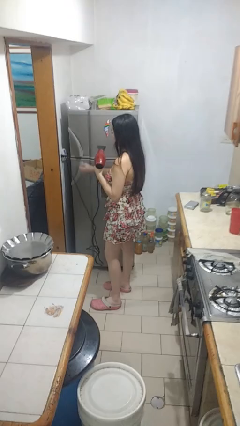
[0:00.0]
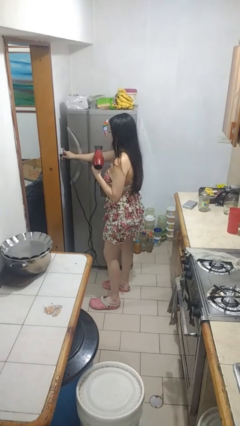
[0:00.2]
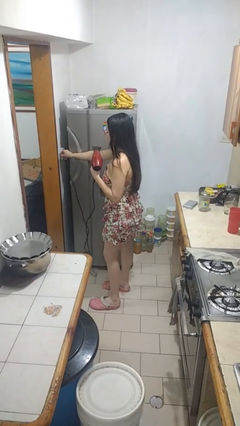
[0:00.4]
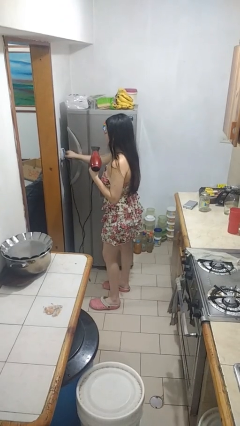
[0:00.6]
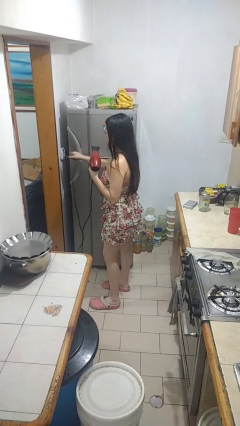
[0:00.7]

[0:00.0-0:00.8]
person unplugs from electrical socket

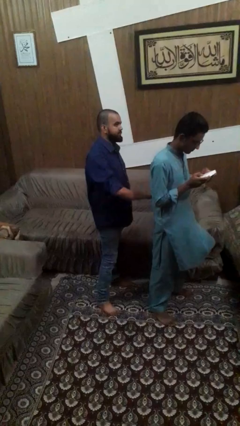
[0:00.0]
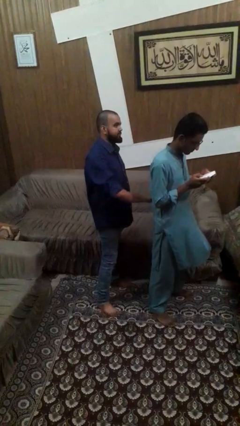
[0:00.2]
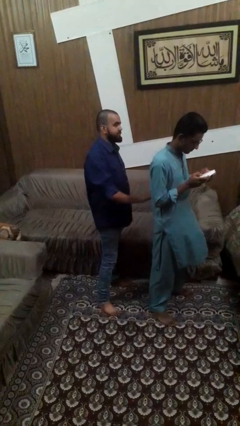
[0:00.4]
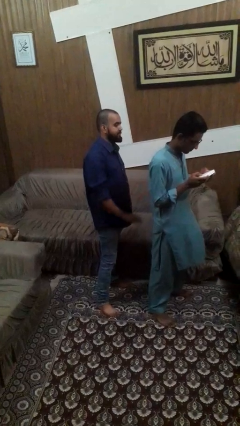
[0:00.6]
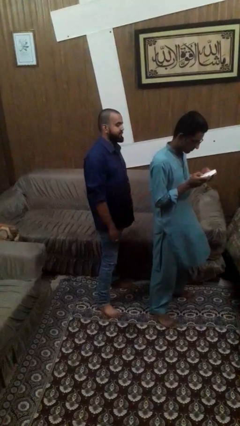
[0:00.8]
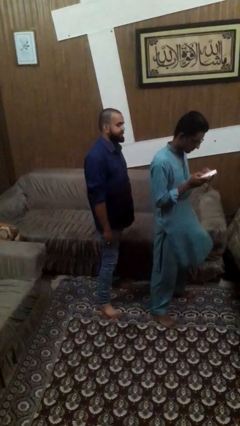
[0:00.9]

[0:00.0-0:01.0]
person touches back of person

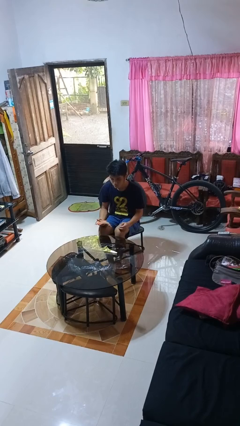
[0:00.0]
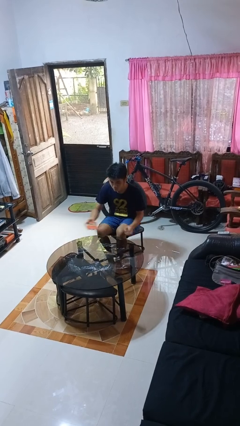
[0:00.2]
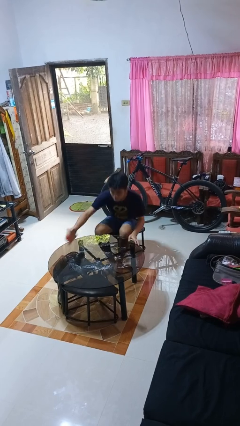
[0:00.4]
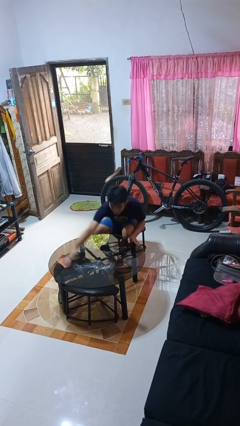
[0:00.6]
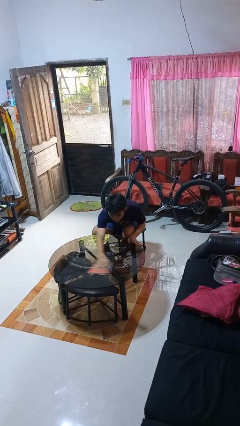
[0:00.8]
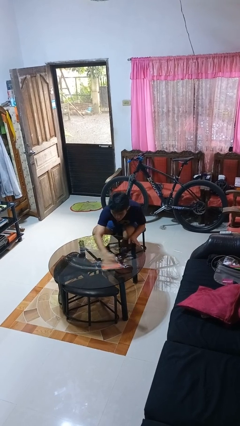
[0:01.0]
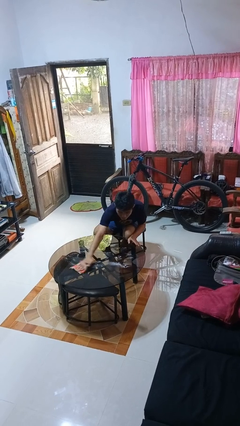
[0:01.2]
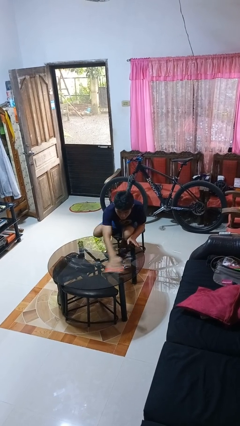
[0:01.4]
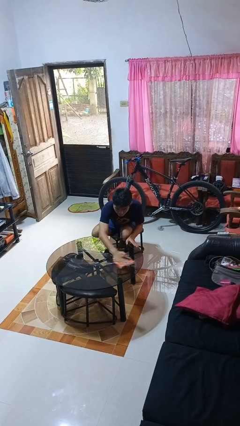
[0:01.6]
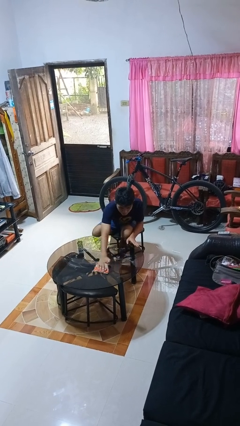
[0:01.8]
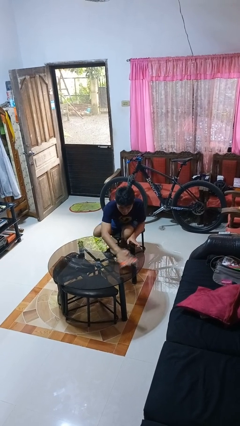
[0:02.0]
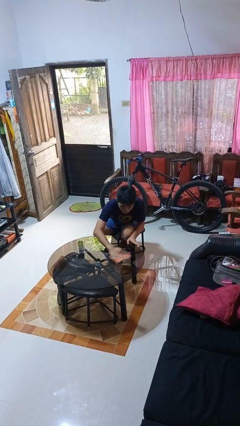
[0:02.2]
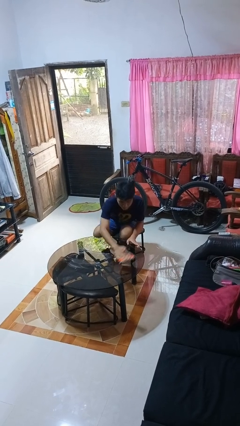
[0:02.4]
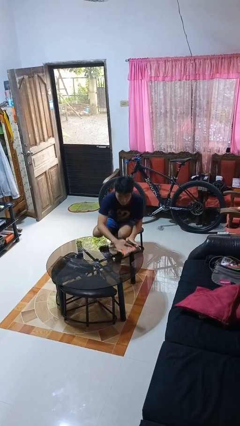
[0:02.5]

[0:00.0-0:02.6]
person cleans table with rag

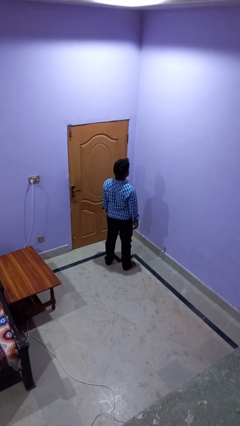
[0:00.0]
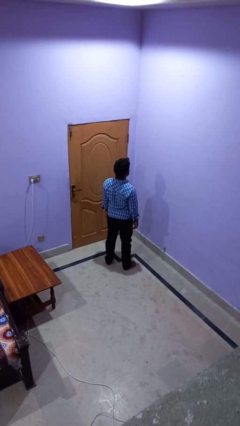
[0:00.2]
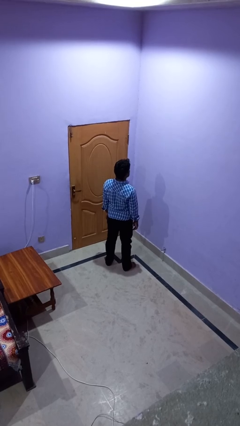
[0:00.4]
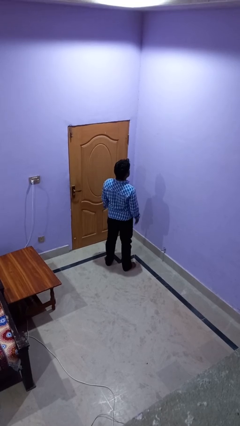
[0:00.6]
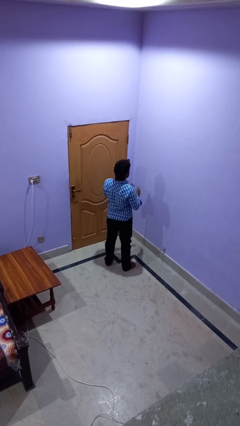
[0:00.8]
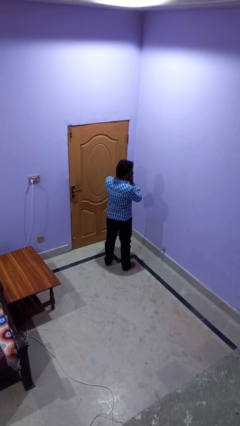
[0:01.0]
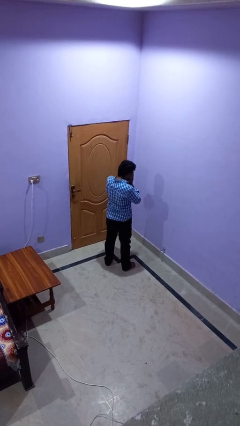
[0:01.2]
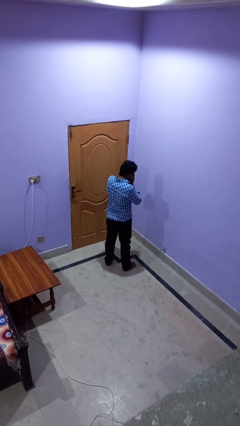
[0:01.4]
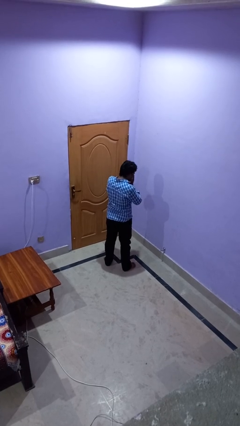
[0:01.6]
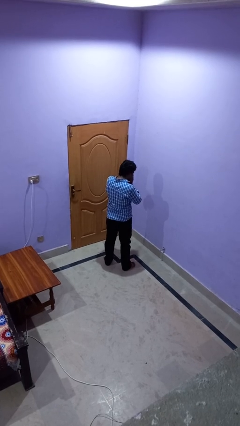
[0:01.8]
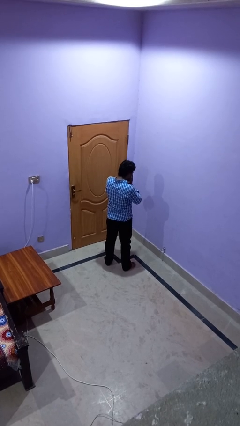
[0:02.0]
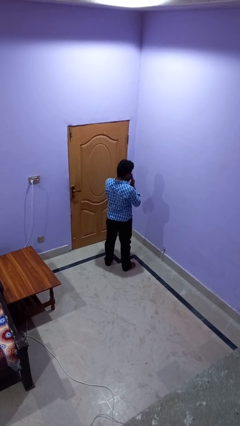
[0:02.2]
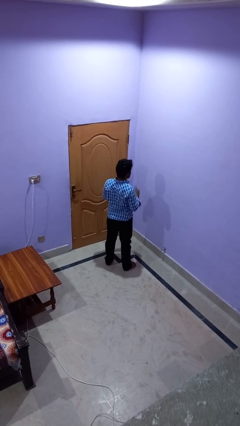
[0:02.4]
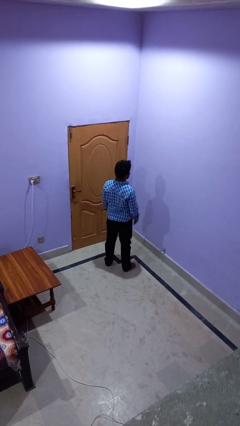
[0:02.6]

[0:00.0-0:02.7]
person sneezes into hand

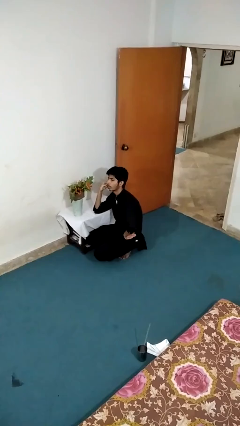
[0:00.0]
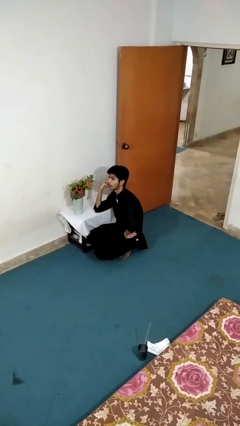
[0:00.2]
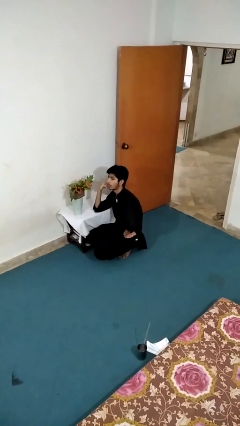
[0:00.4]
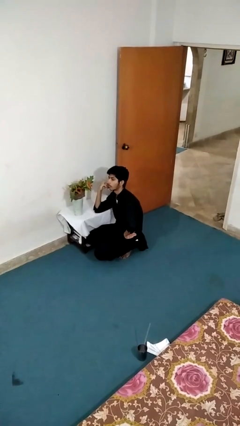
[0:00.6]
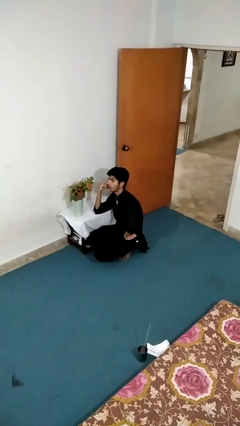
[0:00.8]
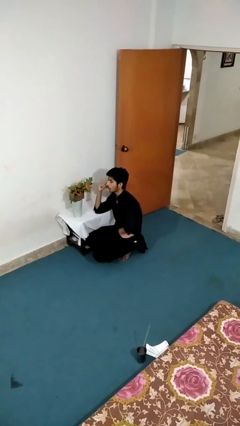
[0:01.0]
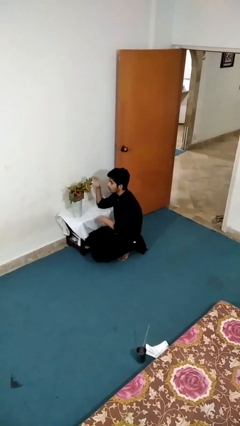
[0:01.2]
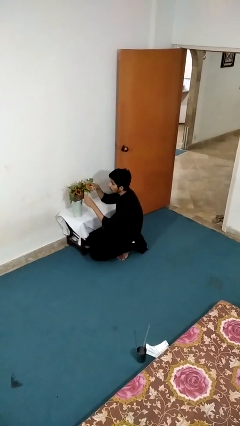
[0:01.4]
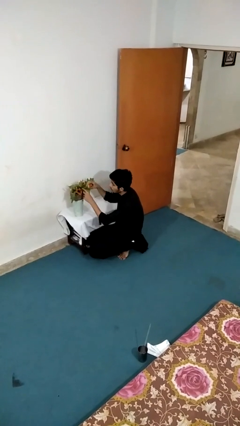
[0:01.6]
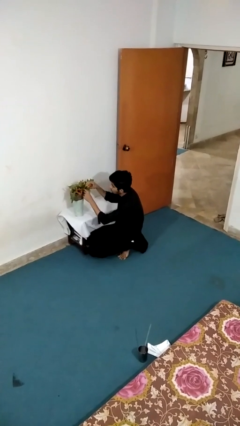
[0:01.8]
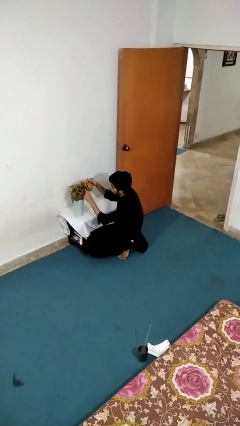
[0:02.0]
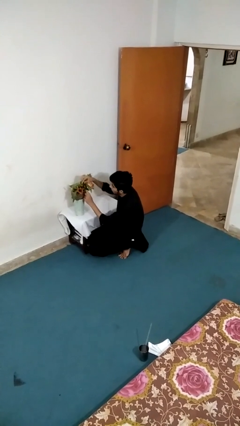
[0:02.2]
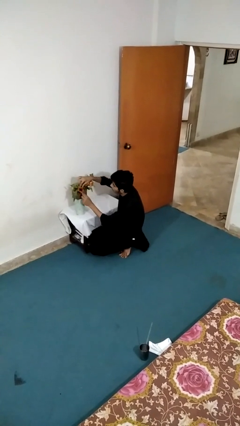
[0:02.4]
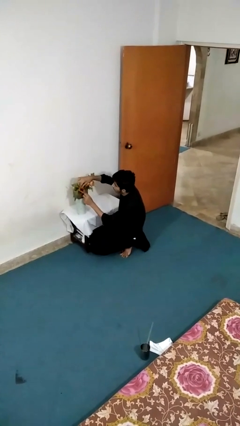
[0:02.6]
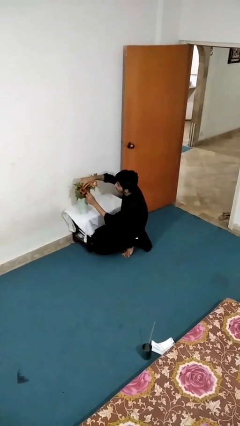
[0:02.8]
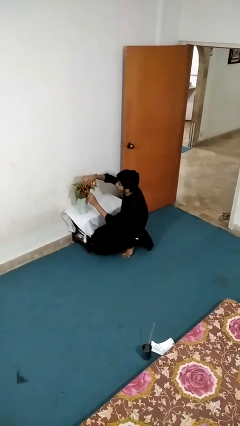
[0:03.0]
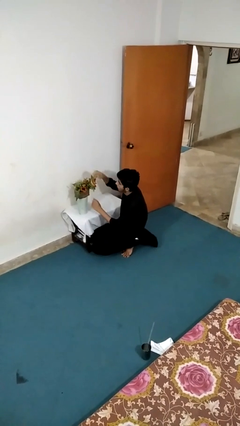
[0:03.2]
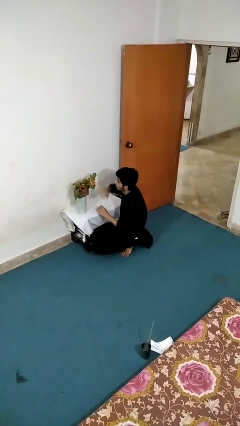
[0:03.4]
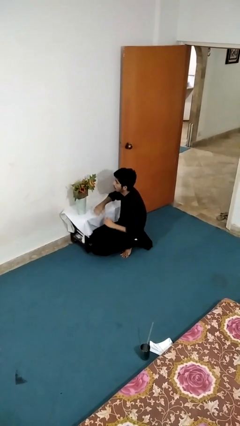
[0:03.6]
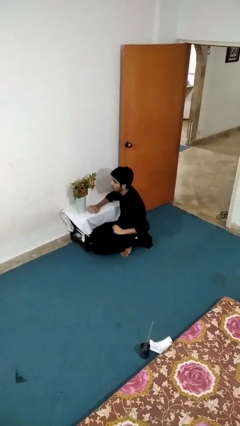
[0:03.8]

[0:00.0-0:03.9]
person arranges flowers in vase

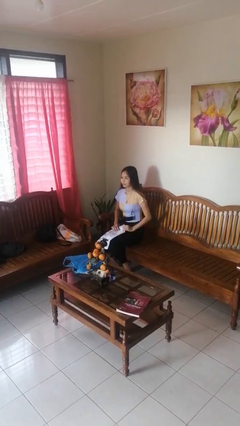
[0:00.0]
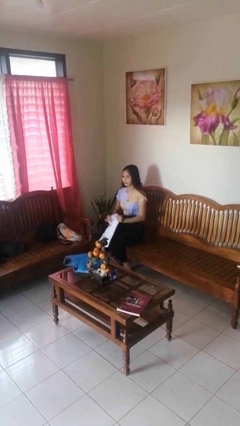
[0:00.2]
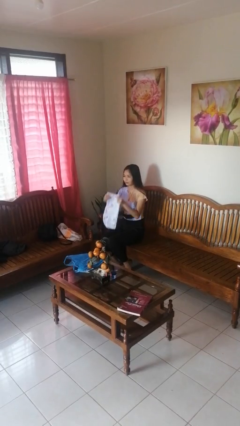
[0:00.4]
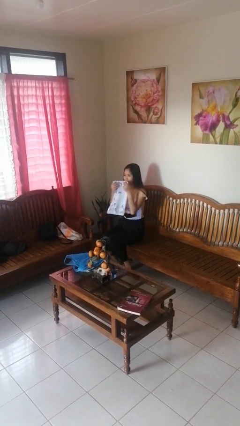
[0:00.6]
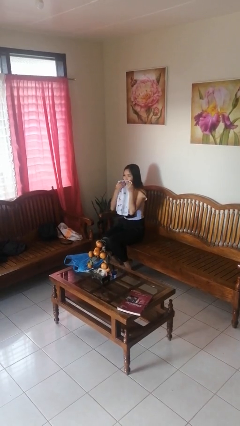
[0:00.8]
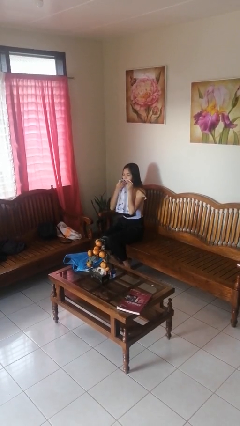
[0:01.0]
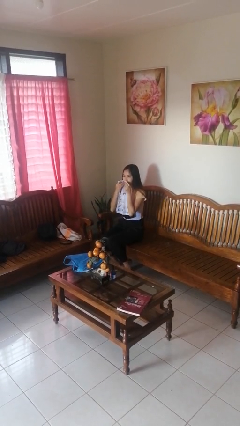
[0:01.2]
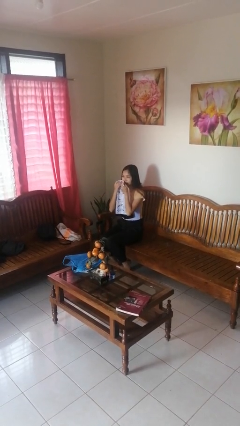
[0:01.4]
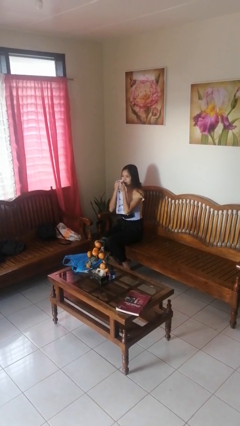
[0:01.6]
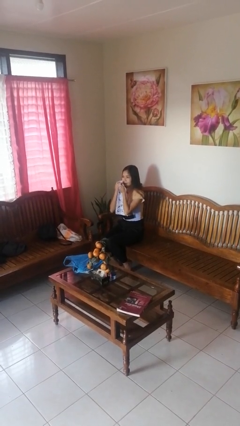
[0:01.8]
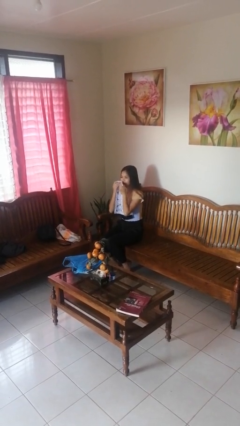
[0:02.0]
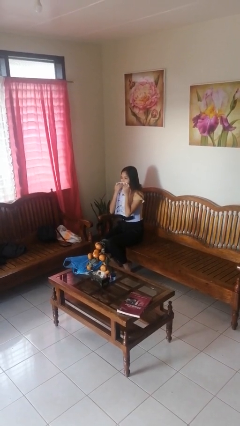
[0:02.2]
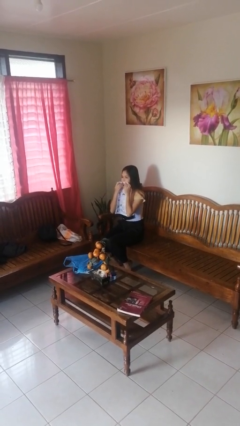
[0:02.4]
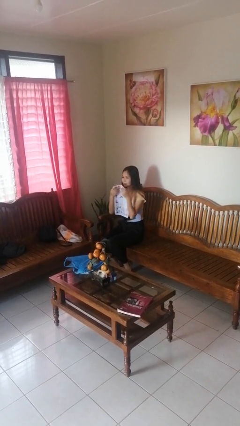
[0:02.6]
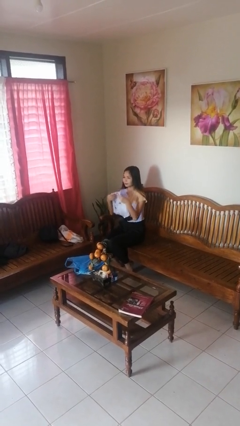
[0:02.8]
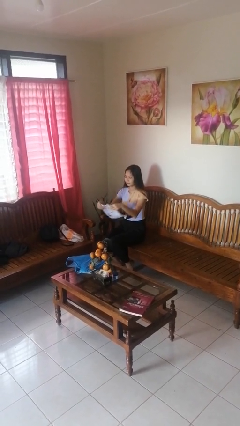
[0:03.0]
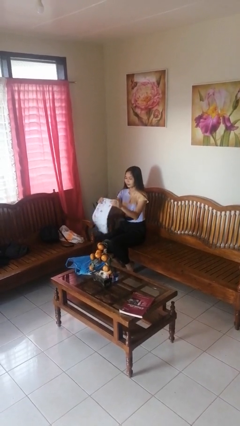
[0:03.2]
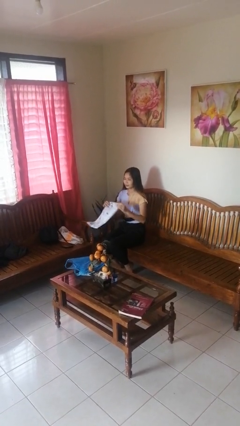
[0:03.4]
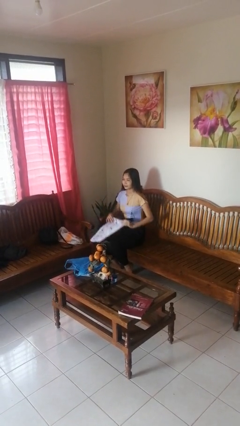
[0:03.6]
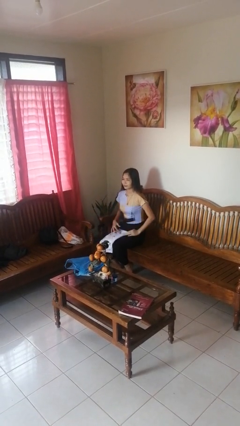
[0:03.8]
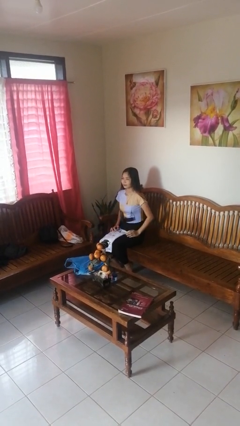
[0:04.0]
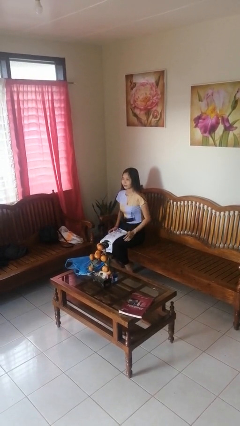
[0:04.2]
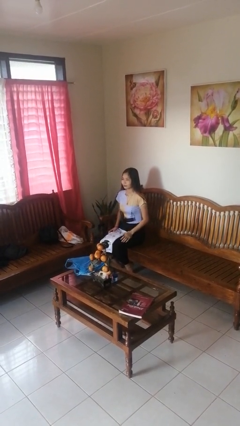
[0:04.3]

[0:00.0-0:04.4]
person wipes mouth with napkin

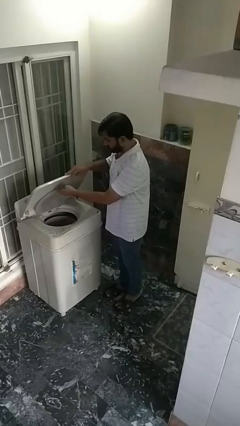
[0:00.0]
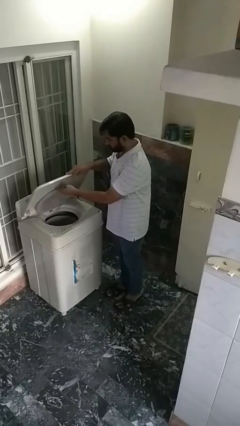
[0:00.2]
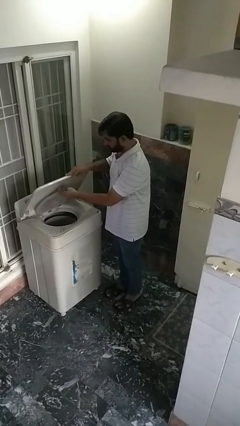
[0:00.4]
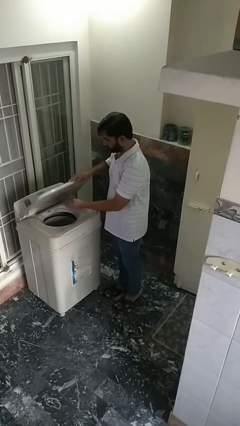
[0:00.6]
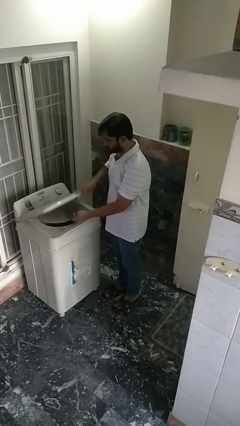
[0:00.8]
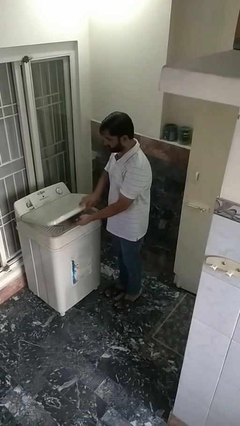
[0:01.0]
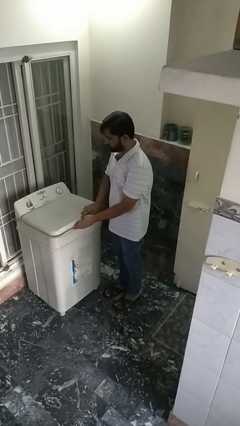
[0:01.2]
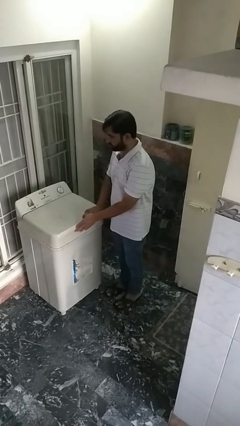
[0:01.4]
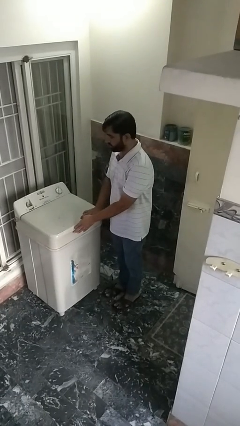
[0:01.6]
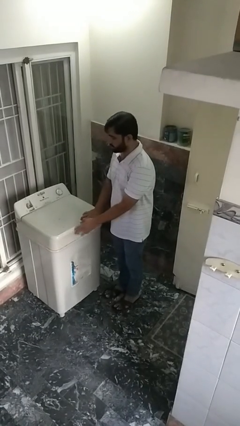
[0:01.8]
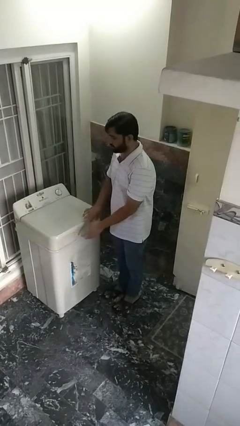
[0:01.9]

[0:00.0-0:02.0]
person closes clothes washer

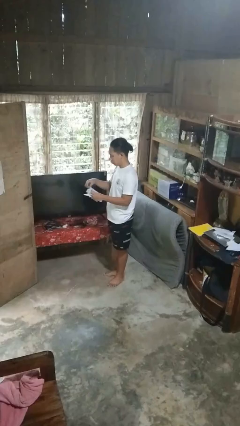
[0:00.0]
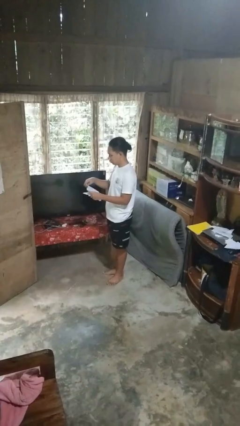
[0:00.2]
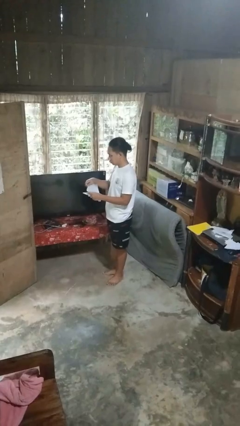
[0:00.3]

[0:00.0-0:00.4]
person tears paper
